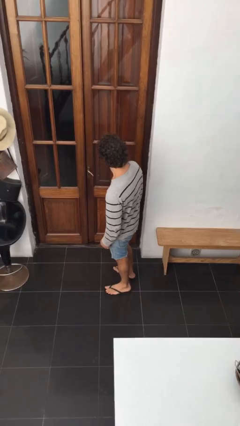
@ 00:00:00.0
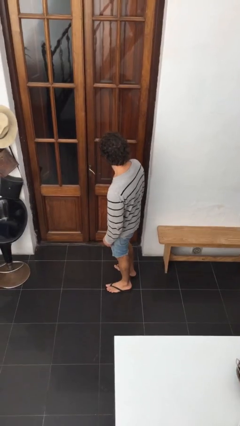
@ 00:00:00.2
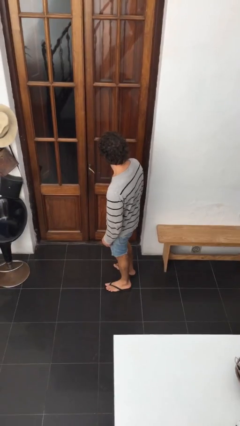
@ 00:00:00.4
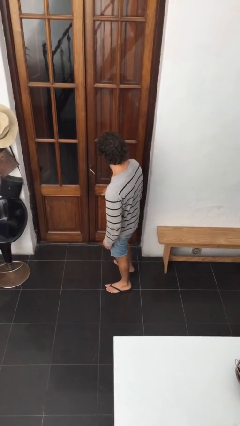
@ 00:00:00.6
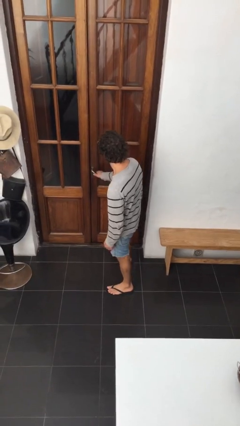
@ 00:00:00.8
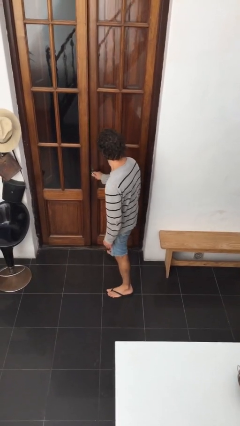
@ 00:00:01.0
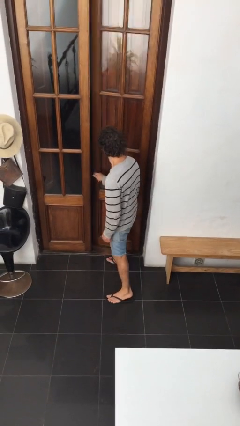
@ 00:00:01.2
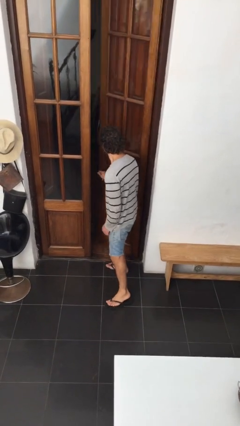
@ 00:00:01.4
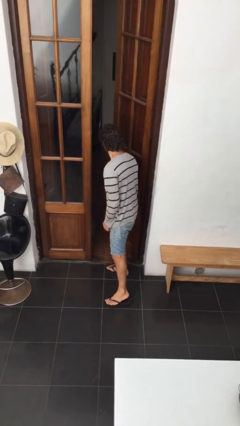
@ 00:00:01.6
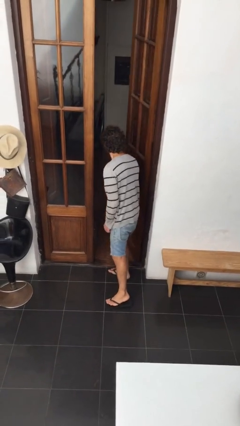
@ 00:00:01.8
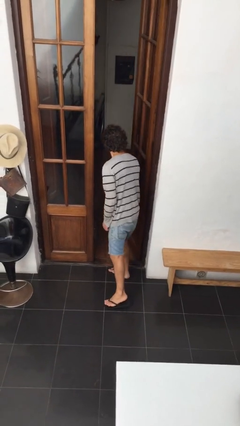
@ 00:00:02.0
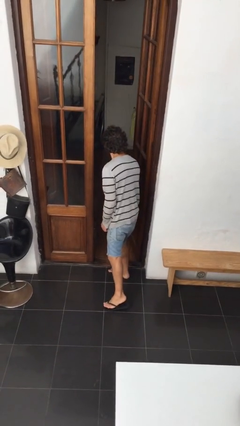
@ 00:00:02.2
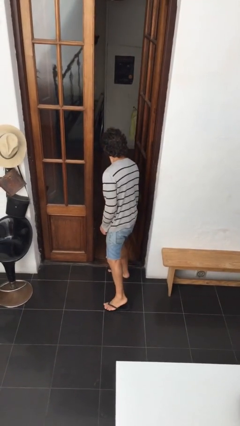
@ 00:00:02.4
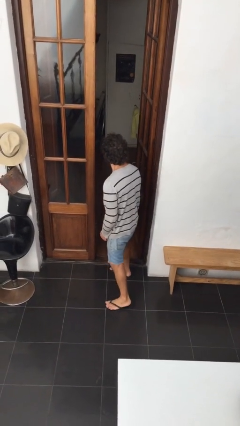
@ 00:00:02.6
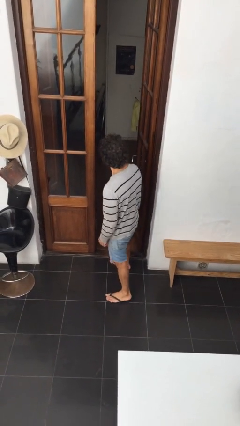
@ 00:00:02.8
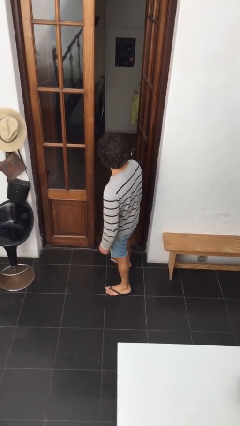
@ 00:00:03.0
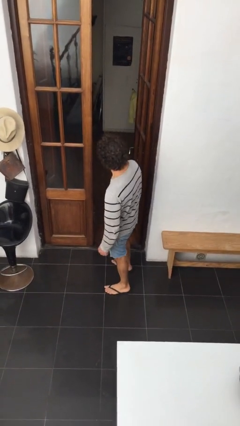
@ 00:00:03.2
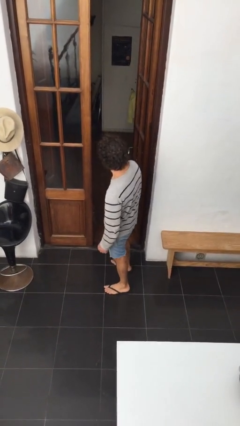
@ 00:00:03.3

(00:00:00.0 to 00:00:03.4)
person opens facility door

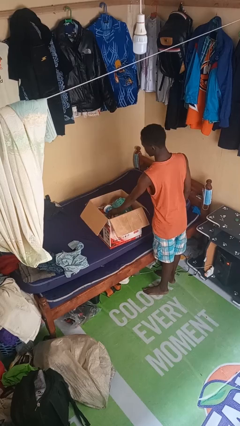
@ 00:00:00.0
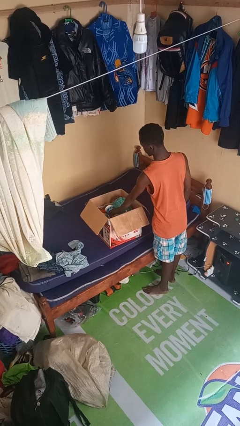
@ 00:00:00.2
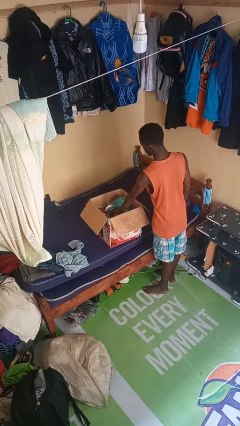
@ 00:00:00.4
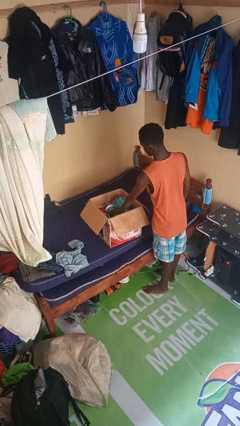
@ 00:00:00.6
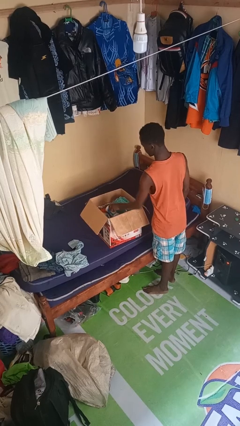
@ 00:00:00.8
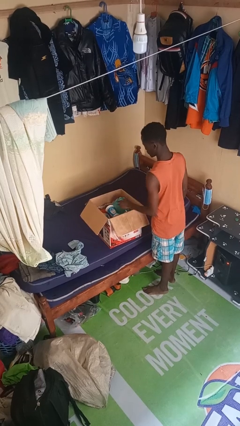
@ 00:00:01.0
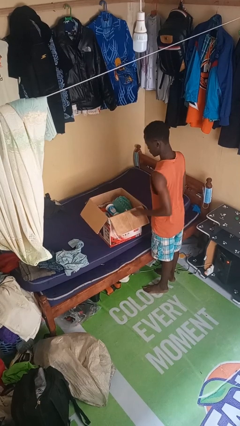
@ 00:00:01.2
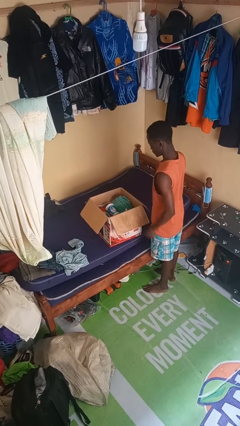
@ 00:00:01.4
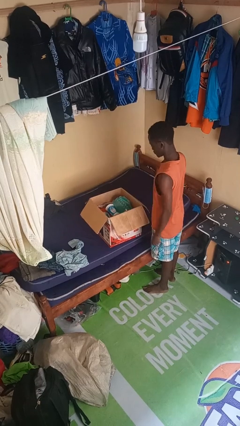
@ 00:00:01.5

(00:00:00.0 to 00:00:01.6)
person puts object into box

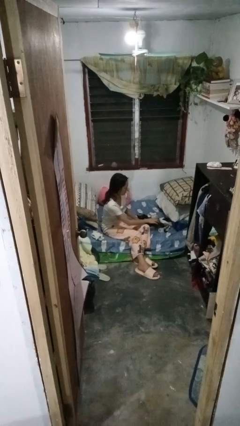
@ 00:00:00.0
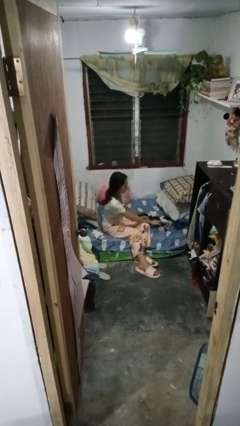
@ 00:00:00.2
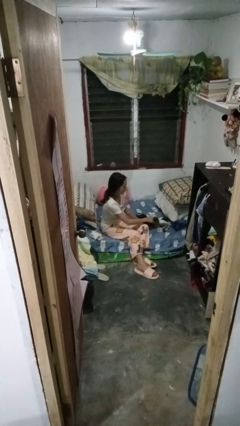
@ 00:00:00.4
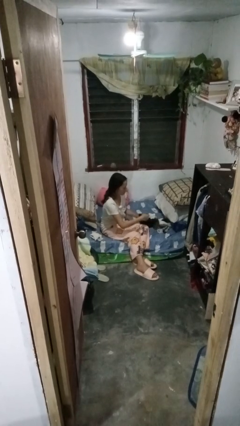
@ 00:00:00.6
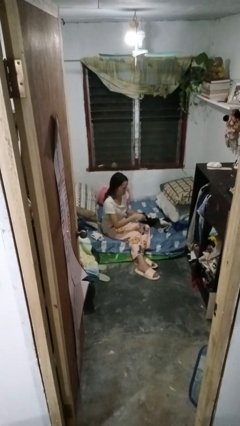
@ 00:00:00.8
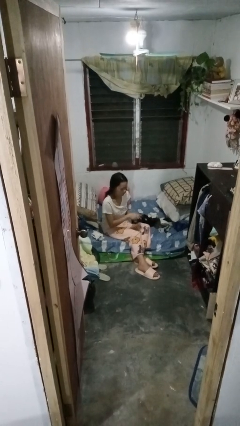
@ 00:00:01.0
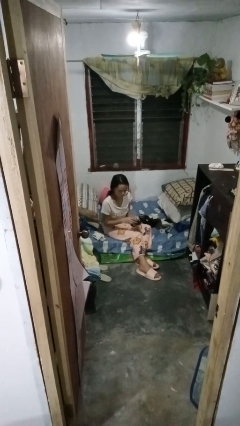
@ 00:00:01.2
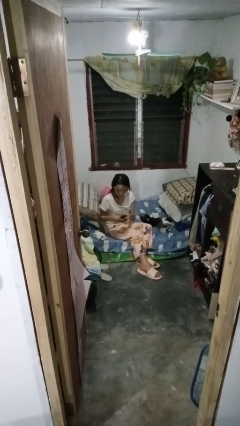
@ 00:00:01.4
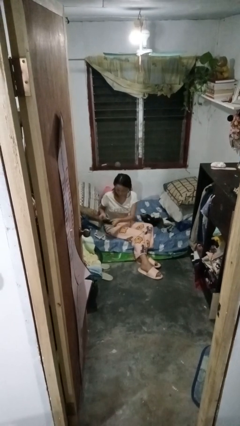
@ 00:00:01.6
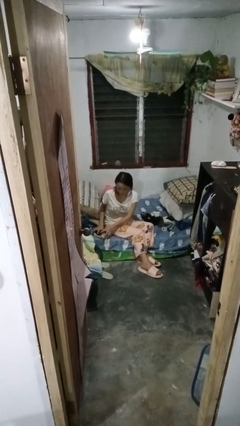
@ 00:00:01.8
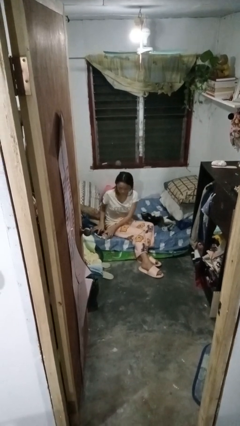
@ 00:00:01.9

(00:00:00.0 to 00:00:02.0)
person folds socks

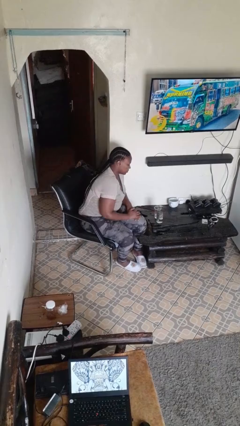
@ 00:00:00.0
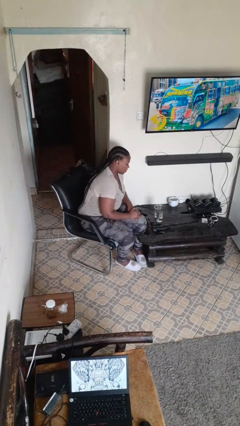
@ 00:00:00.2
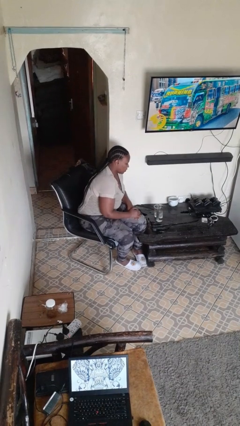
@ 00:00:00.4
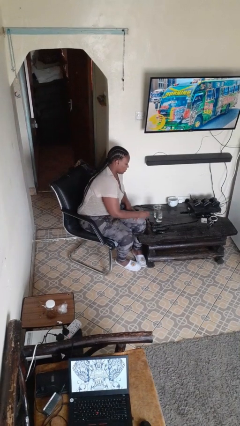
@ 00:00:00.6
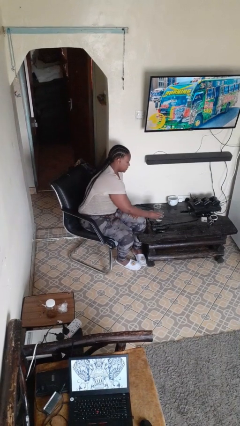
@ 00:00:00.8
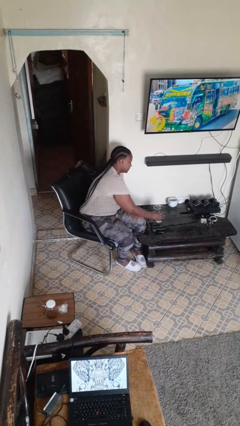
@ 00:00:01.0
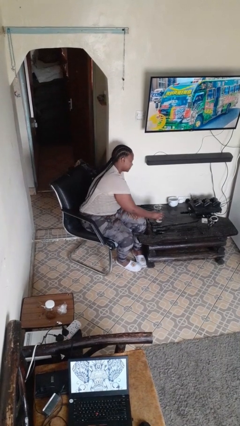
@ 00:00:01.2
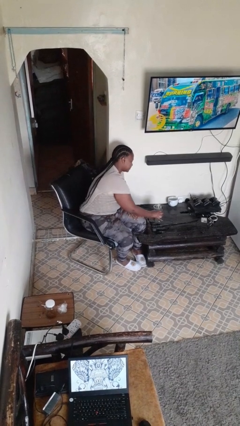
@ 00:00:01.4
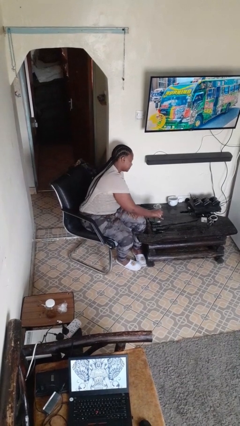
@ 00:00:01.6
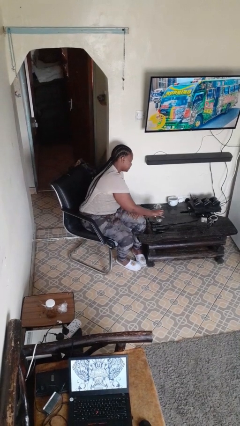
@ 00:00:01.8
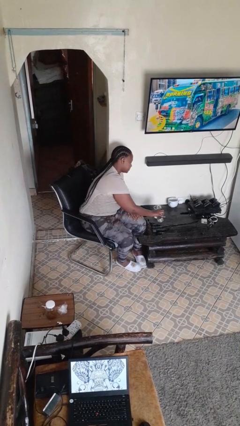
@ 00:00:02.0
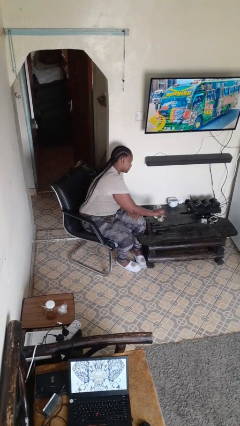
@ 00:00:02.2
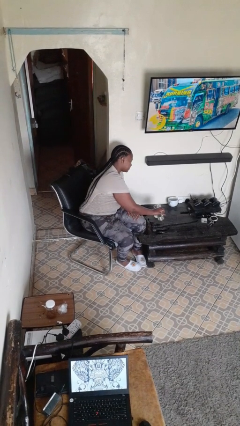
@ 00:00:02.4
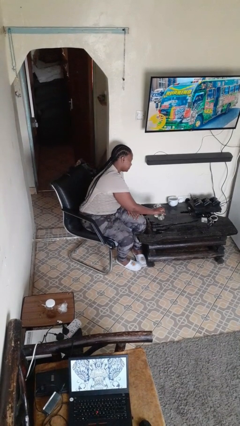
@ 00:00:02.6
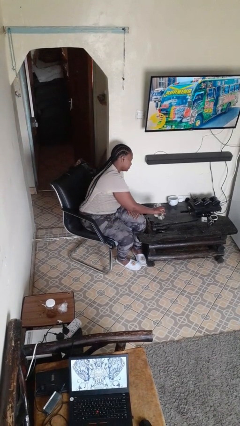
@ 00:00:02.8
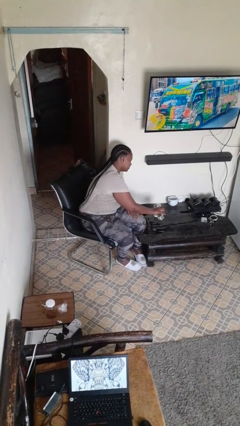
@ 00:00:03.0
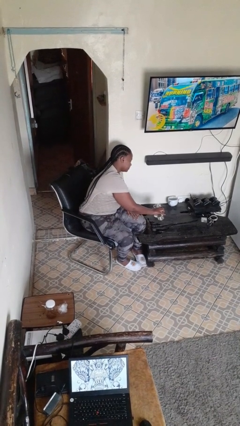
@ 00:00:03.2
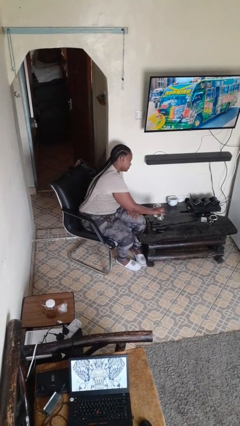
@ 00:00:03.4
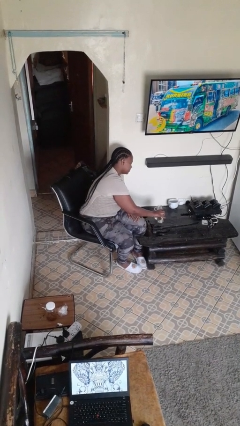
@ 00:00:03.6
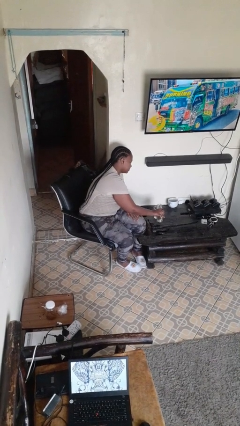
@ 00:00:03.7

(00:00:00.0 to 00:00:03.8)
person pours liquid into cup

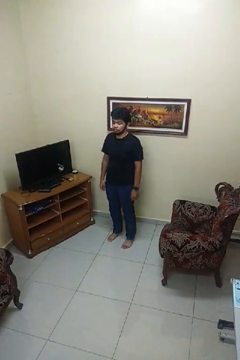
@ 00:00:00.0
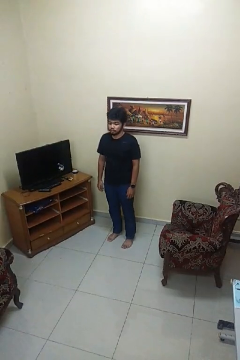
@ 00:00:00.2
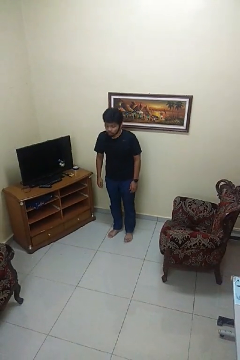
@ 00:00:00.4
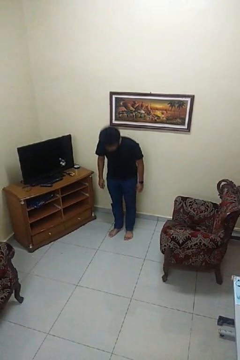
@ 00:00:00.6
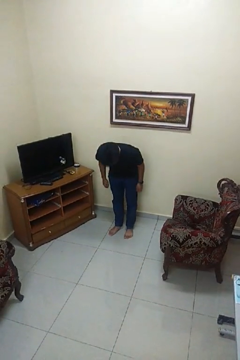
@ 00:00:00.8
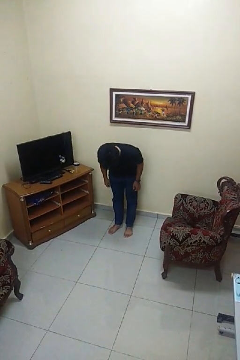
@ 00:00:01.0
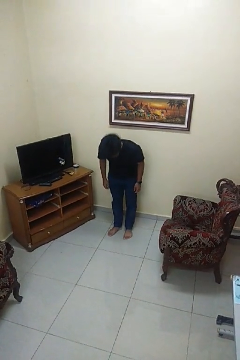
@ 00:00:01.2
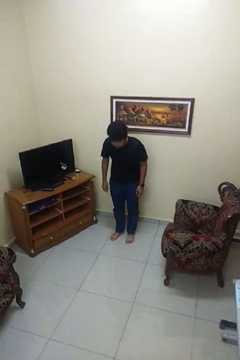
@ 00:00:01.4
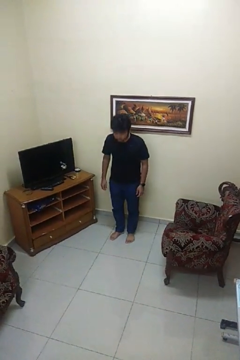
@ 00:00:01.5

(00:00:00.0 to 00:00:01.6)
person bows

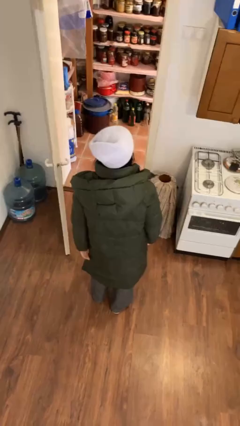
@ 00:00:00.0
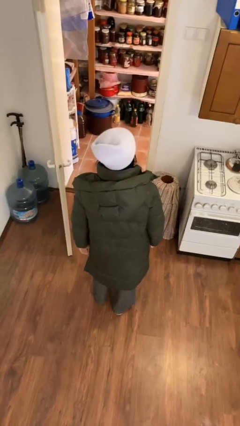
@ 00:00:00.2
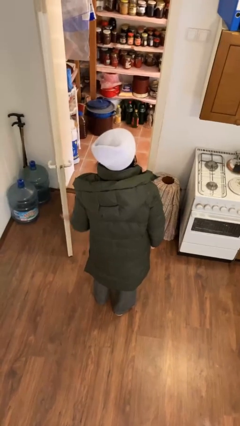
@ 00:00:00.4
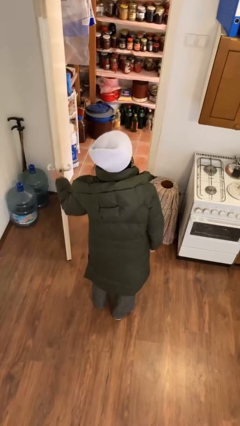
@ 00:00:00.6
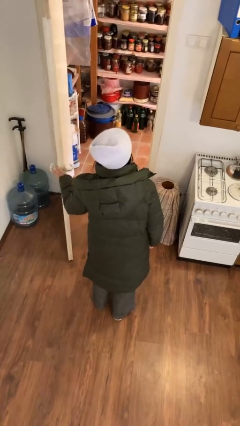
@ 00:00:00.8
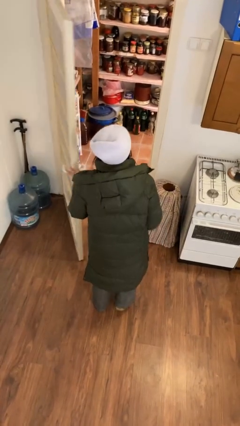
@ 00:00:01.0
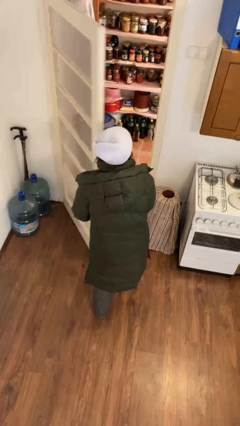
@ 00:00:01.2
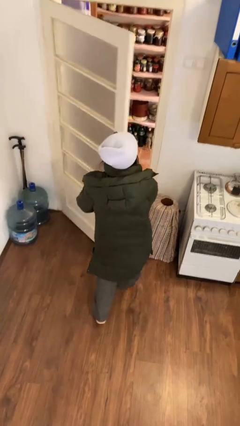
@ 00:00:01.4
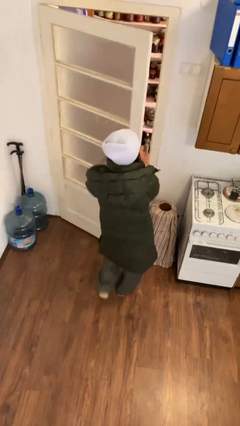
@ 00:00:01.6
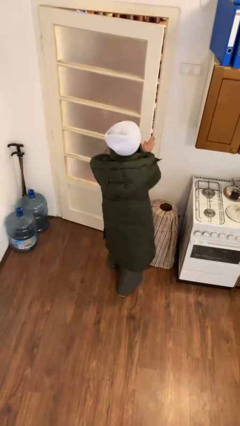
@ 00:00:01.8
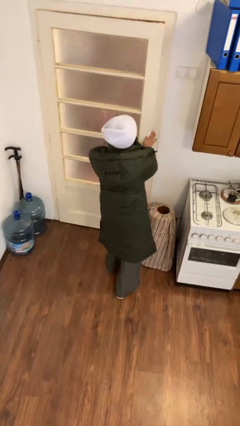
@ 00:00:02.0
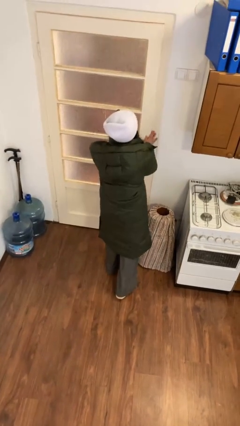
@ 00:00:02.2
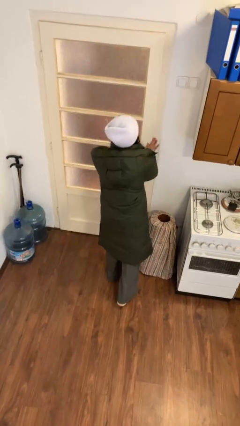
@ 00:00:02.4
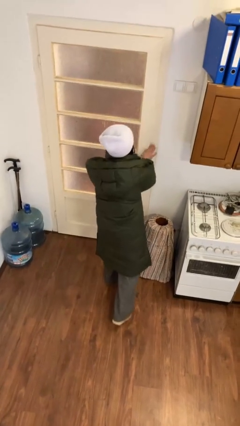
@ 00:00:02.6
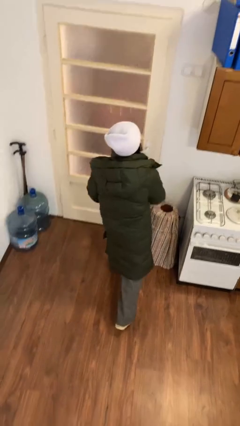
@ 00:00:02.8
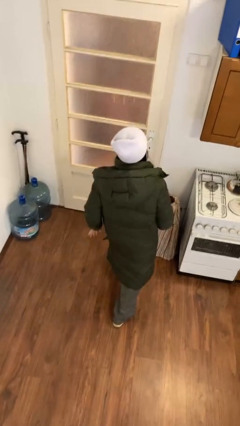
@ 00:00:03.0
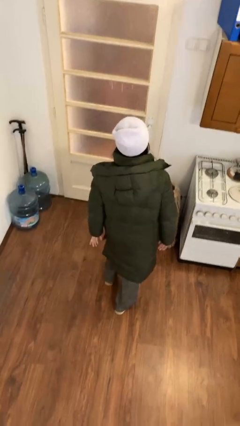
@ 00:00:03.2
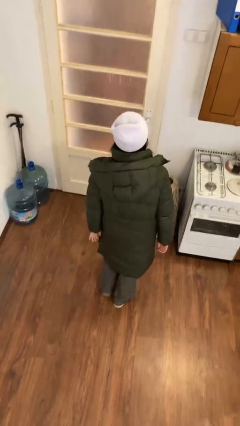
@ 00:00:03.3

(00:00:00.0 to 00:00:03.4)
person closes facility door

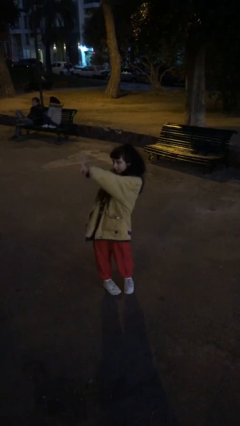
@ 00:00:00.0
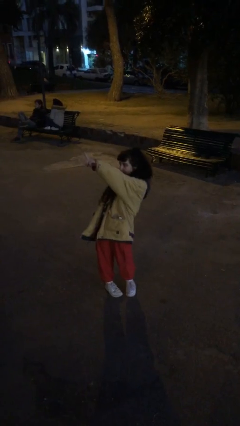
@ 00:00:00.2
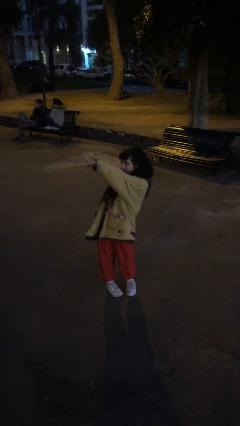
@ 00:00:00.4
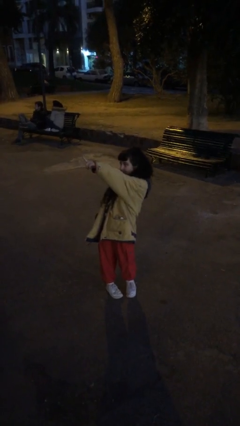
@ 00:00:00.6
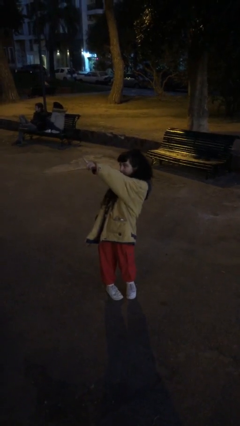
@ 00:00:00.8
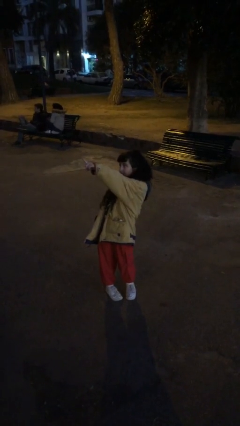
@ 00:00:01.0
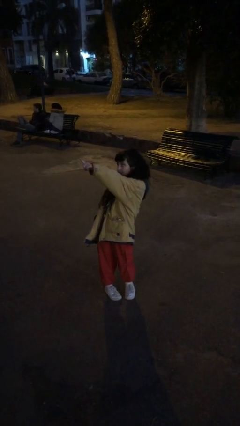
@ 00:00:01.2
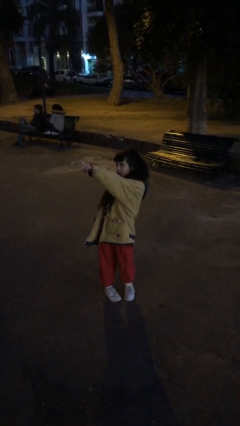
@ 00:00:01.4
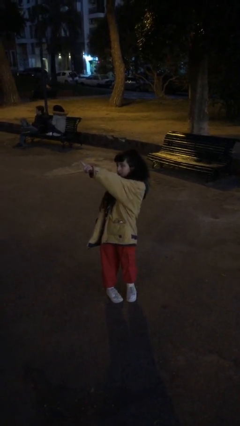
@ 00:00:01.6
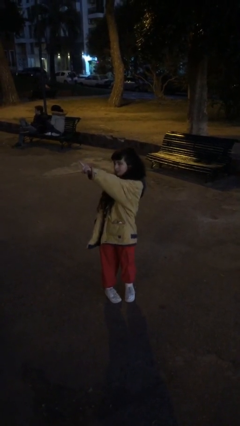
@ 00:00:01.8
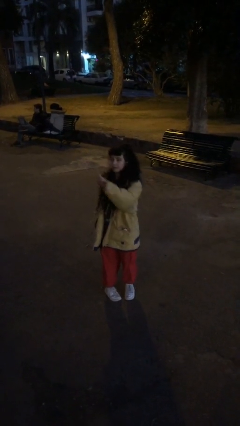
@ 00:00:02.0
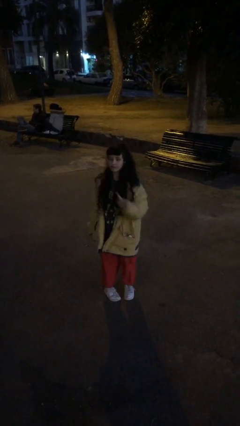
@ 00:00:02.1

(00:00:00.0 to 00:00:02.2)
person points at person
